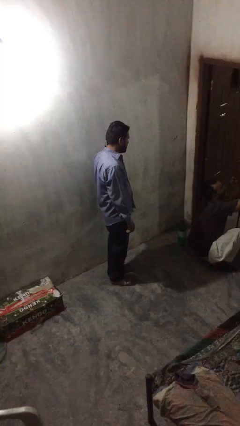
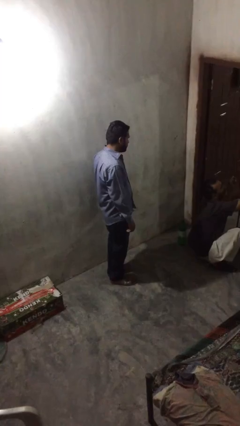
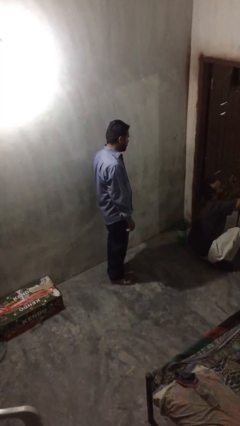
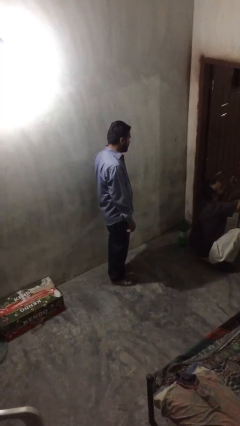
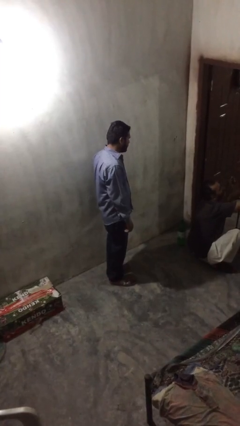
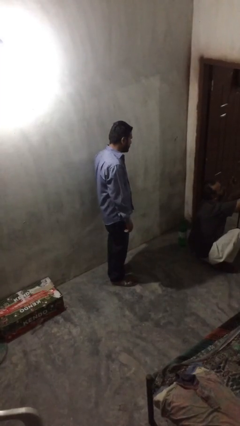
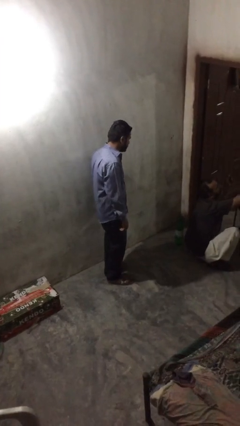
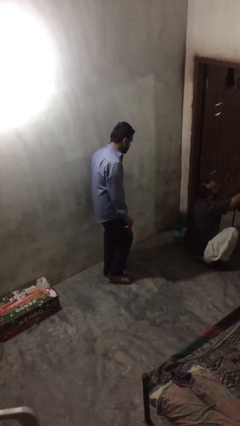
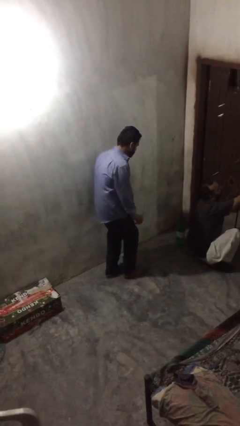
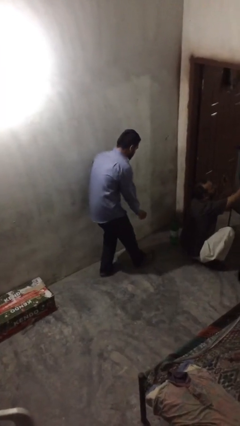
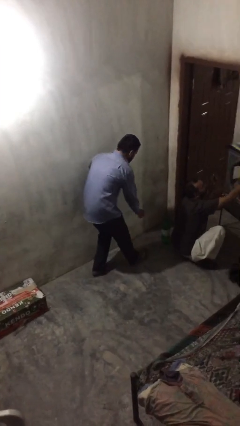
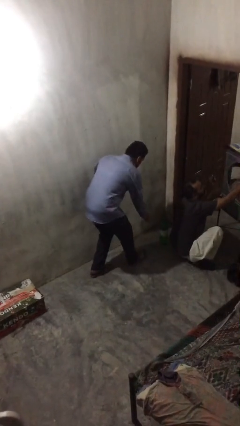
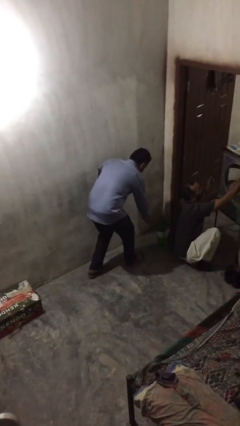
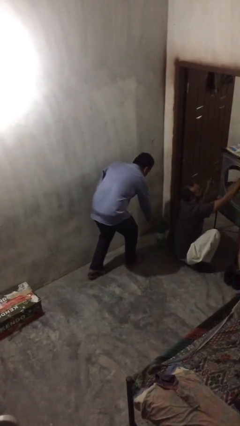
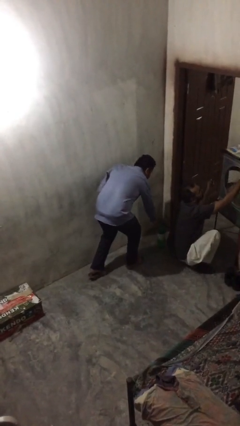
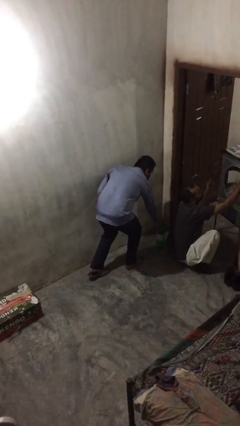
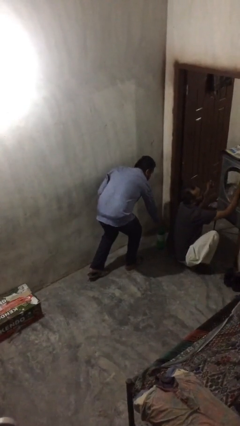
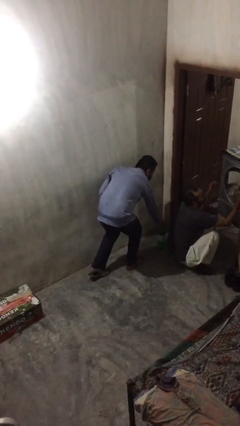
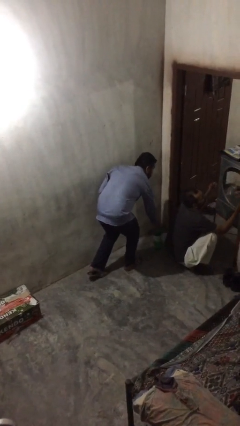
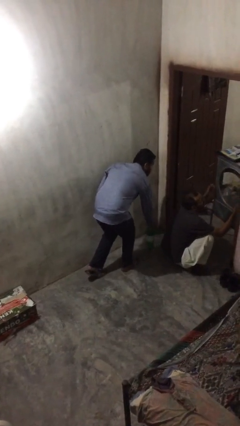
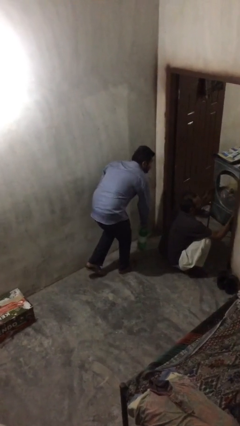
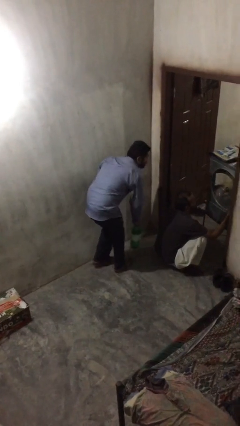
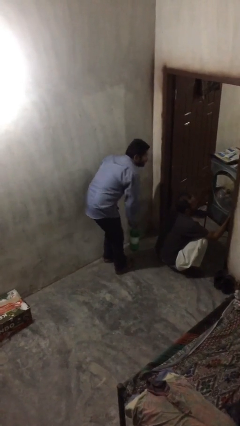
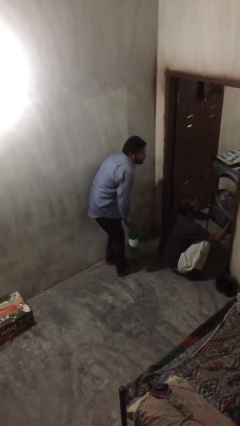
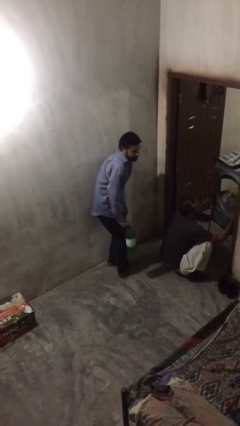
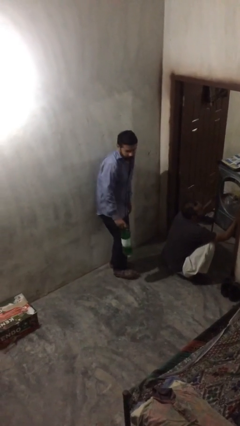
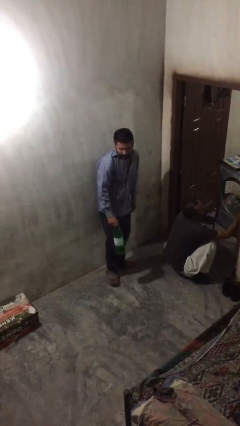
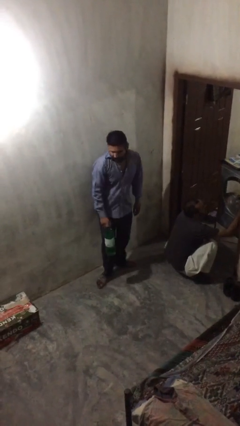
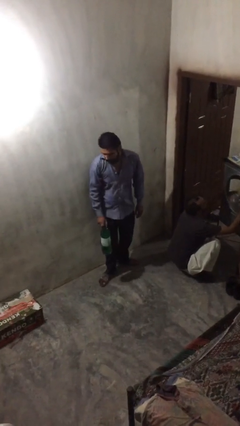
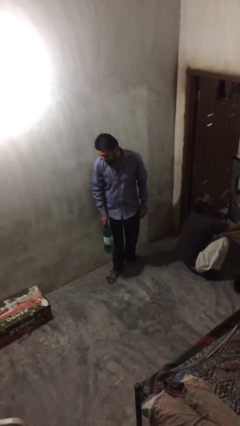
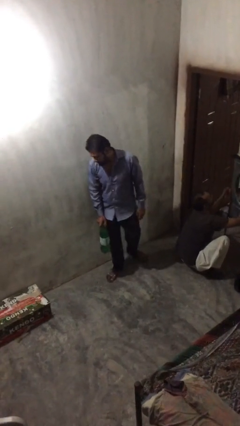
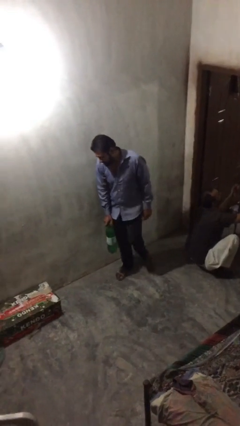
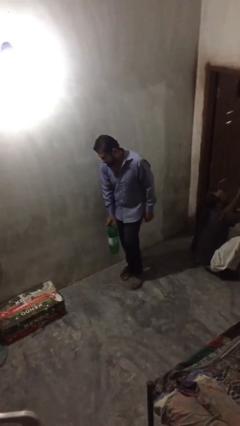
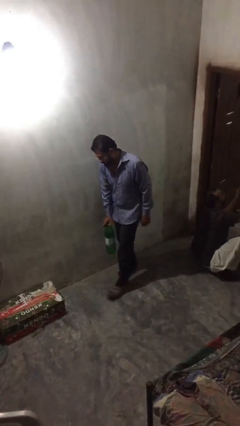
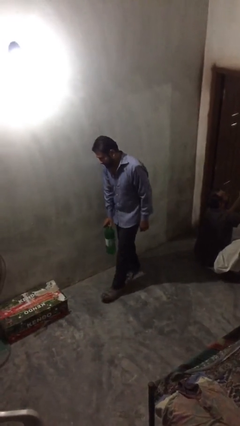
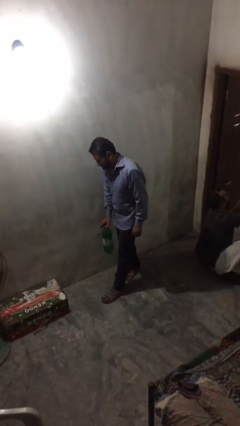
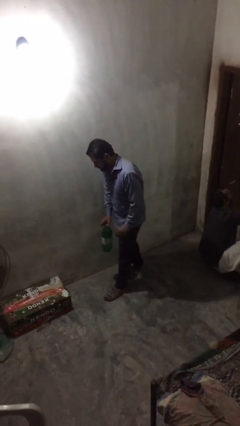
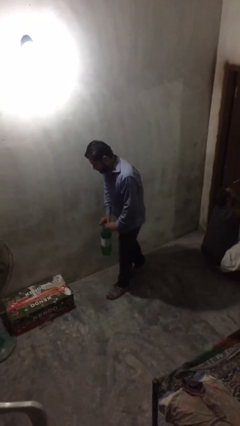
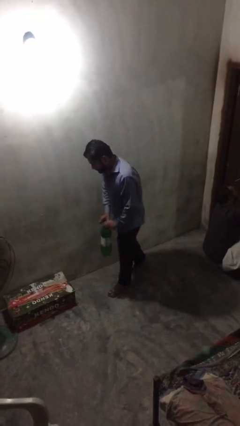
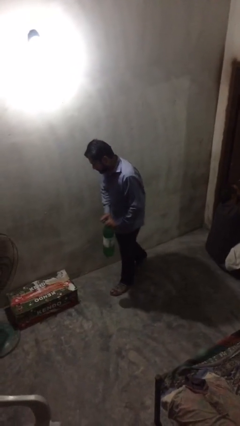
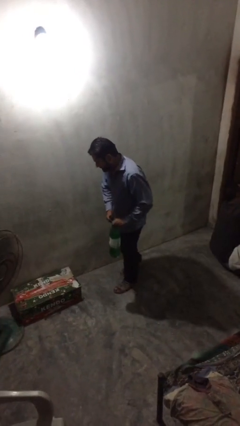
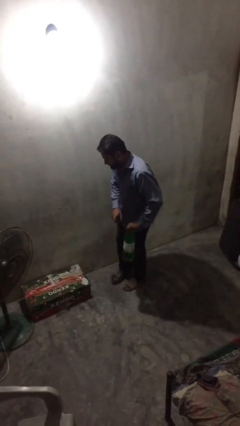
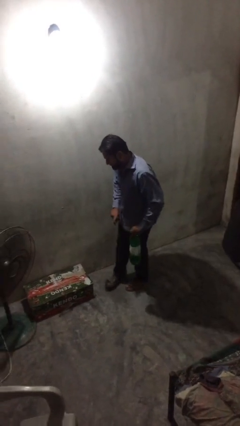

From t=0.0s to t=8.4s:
person steals object from person

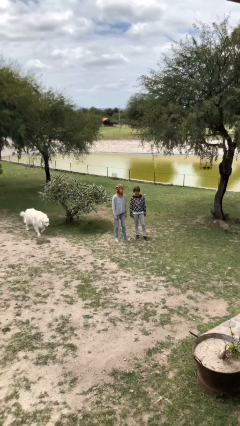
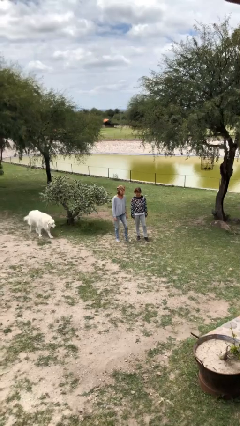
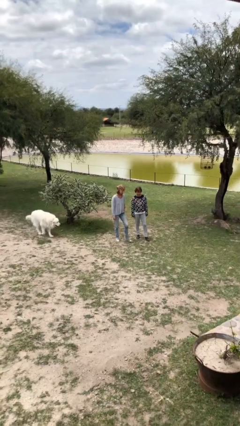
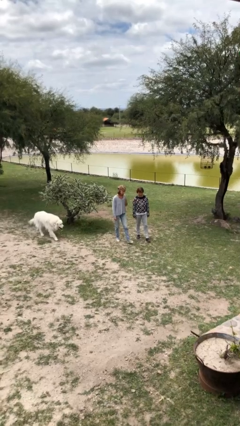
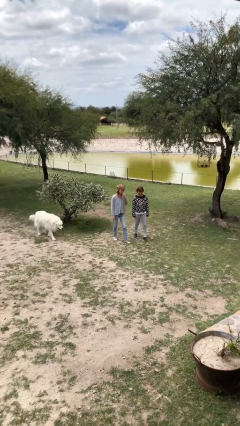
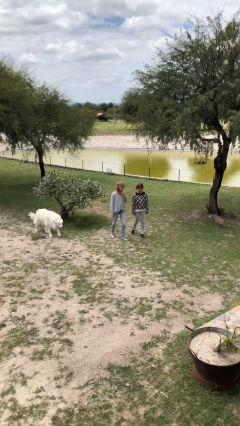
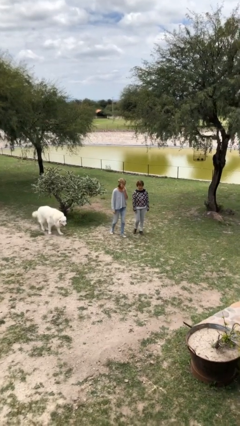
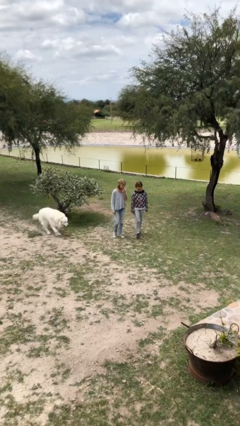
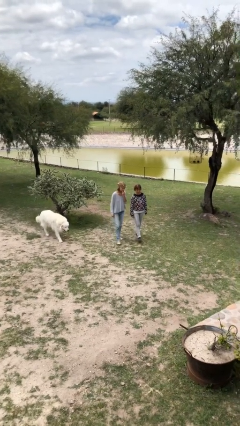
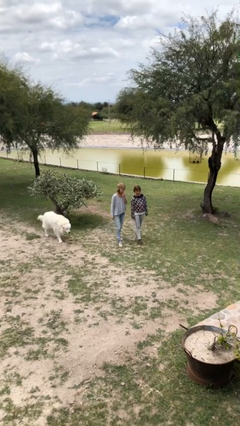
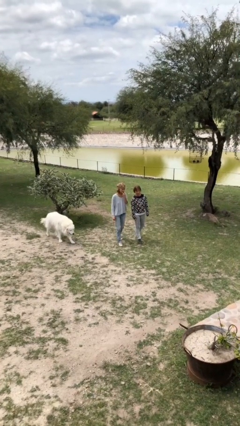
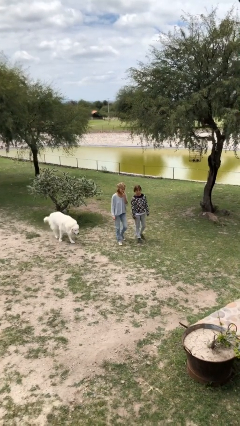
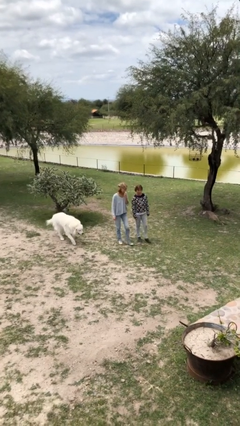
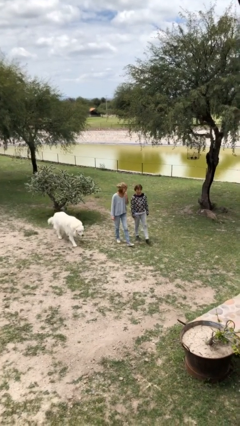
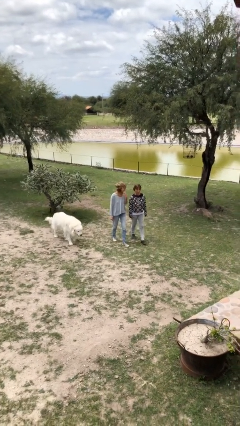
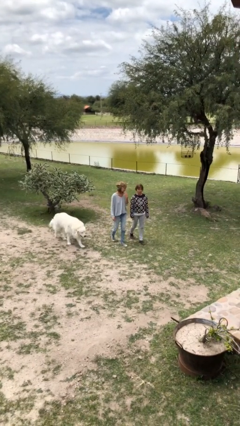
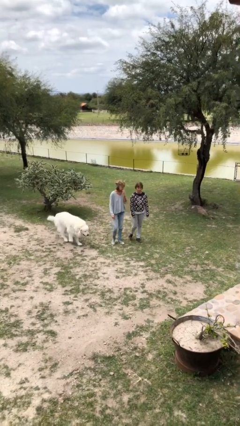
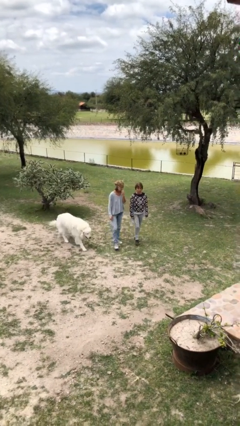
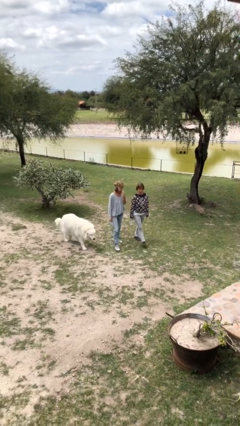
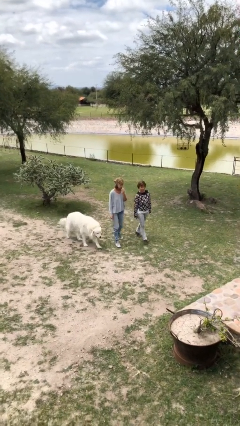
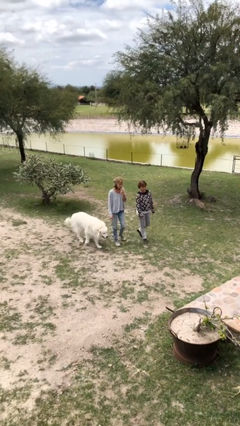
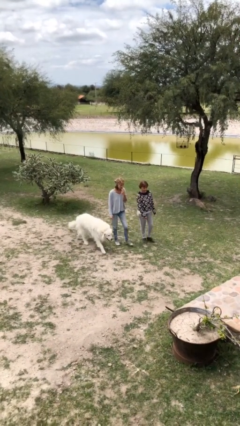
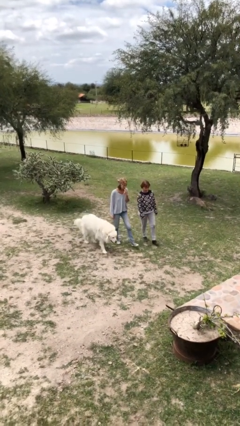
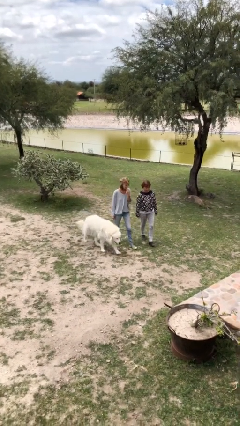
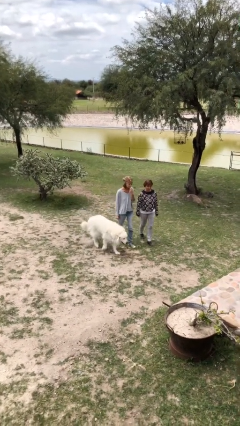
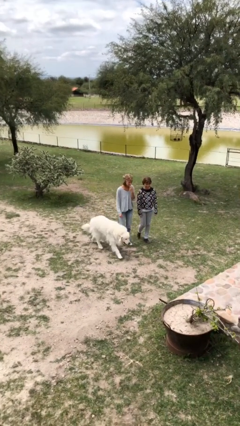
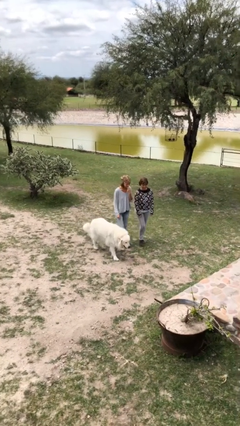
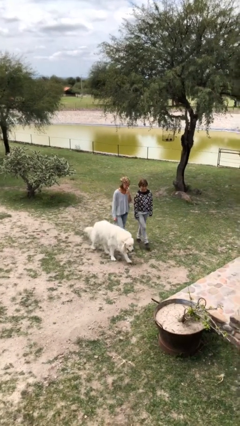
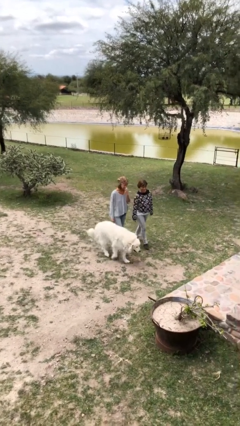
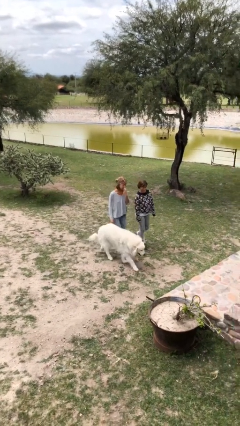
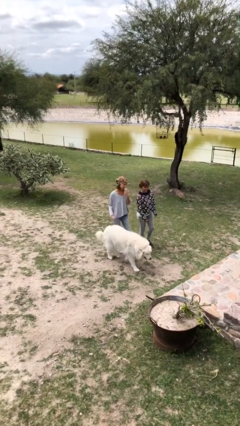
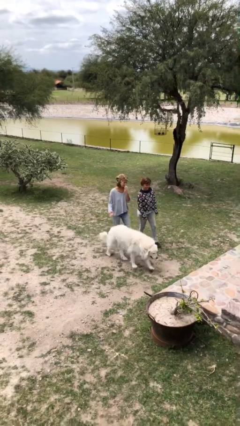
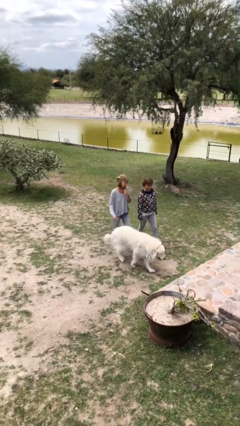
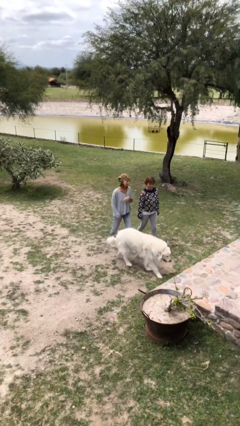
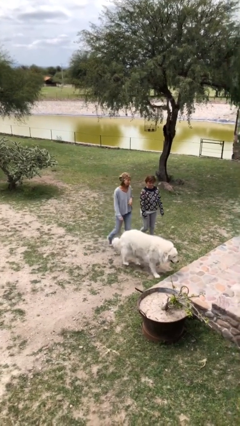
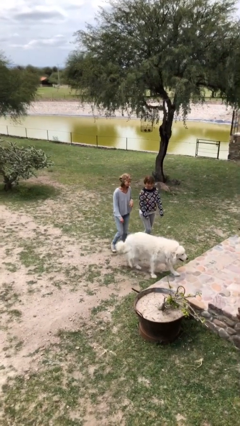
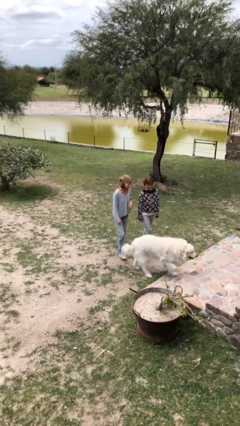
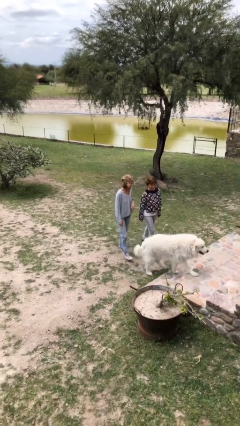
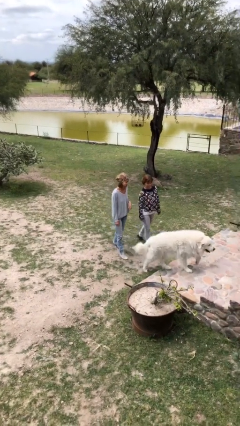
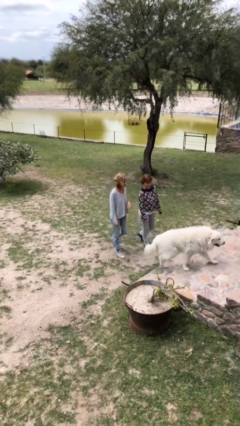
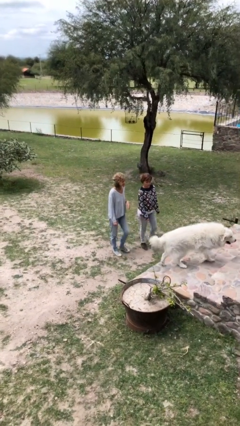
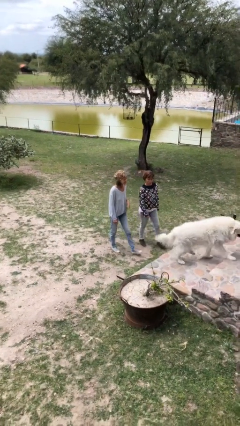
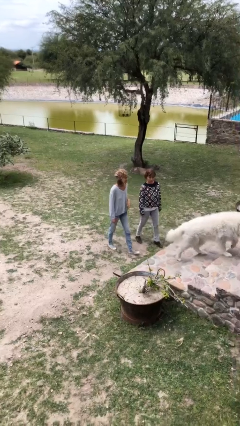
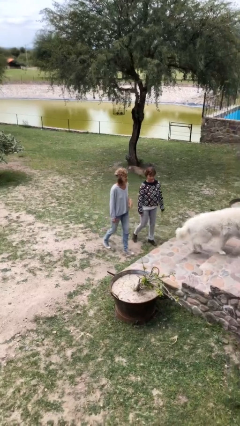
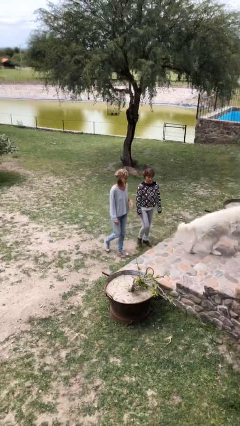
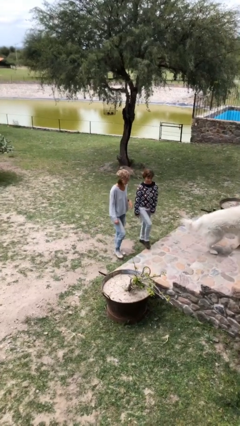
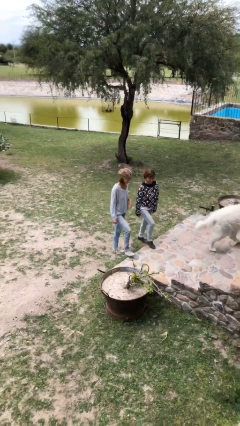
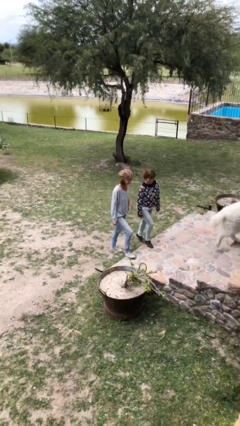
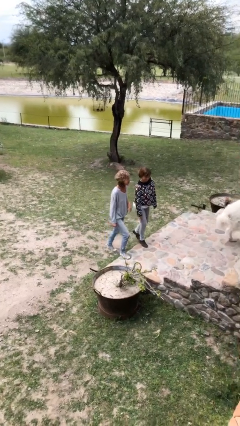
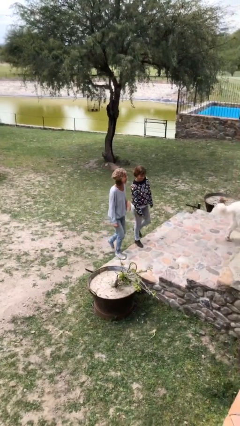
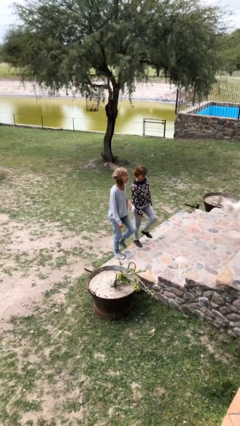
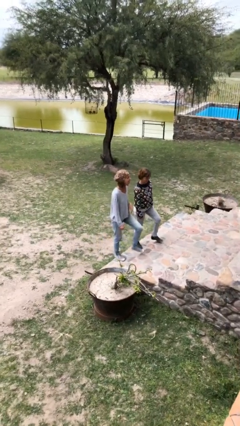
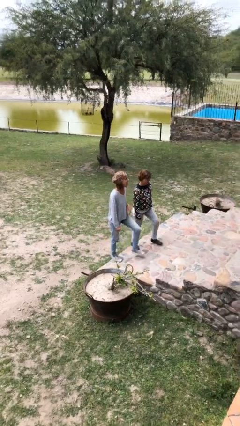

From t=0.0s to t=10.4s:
person talks to person
